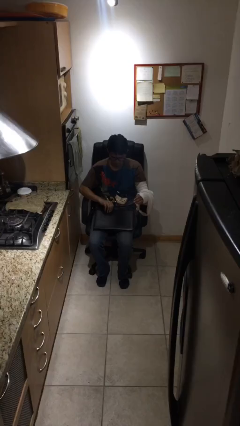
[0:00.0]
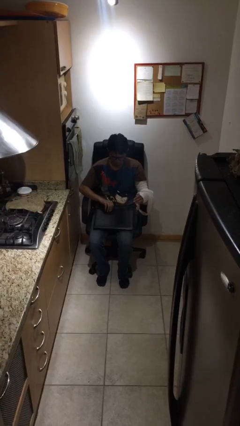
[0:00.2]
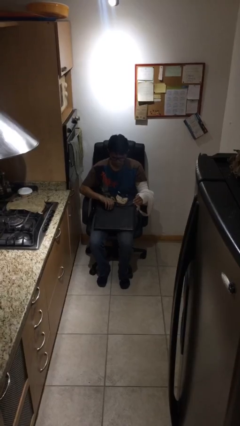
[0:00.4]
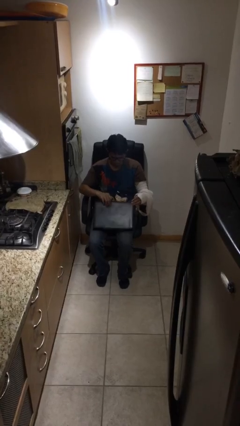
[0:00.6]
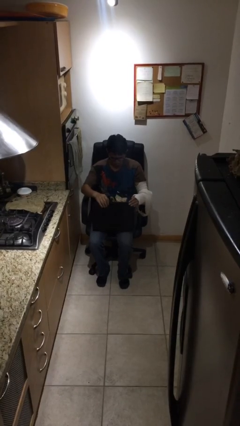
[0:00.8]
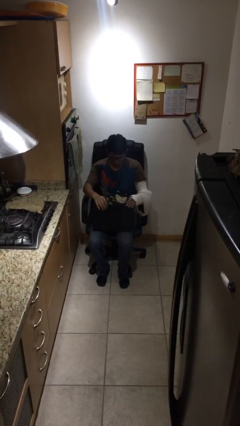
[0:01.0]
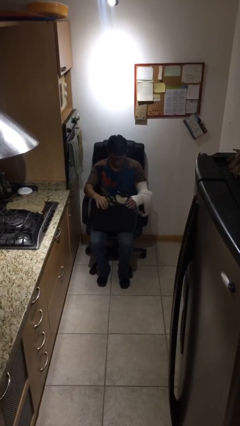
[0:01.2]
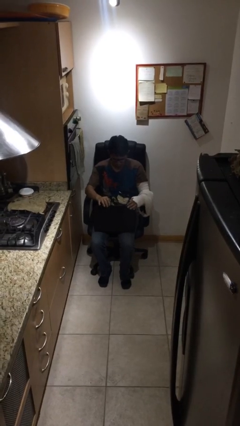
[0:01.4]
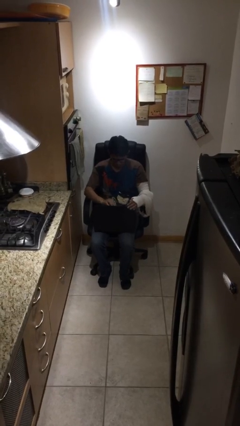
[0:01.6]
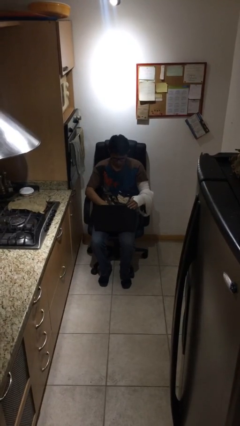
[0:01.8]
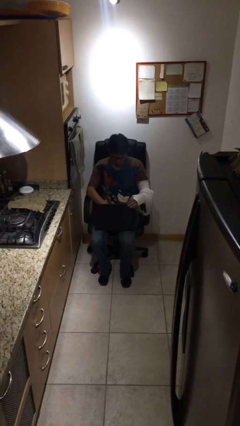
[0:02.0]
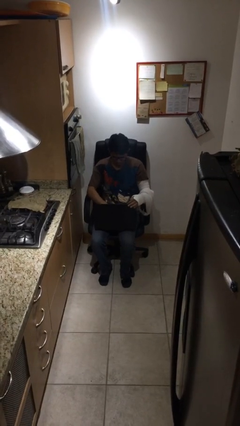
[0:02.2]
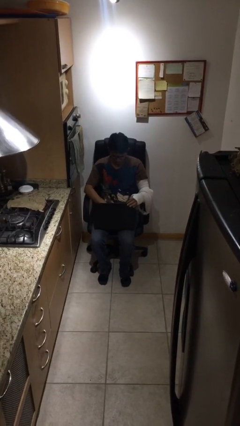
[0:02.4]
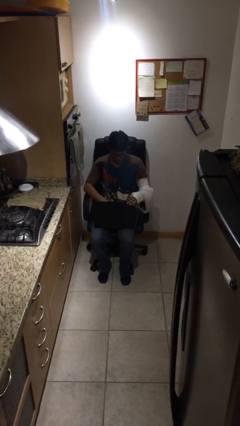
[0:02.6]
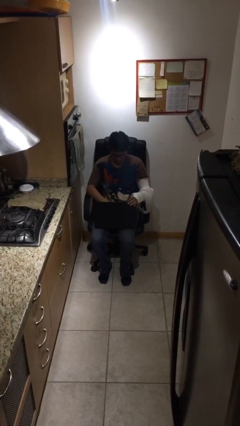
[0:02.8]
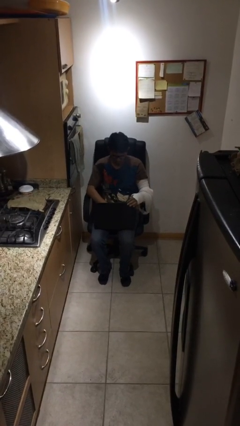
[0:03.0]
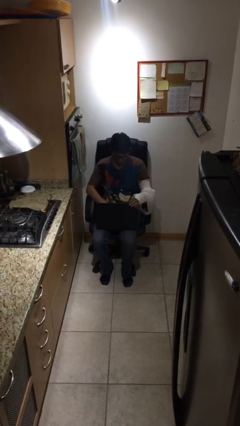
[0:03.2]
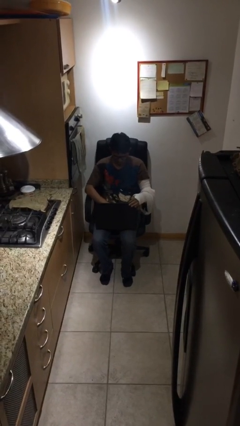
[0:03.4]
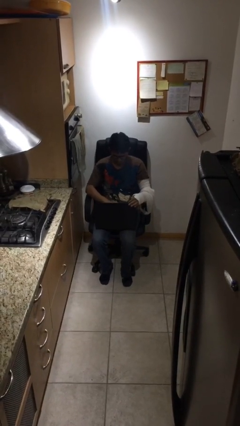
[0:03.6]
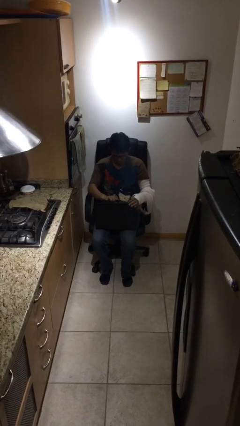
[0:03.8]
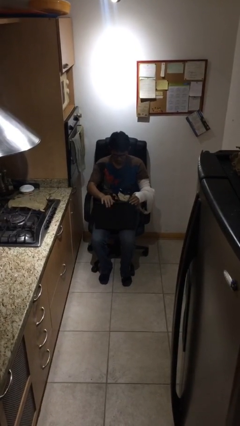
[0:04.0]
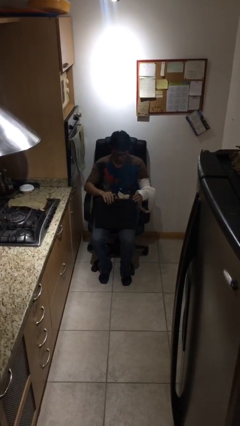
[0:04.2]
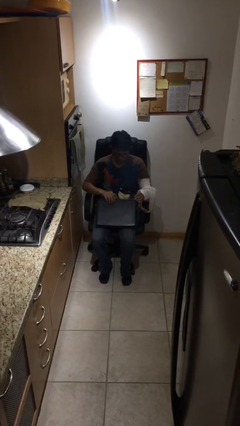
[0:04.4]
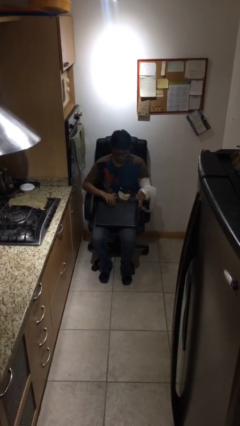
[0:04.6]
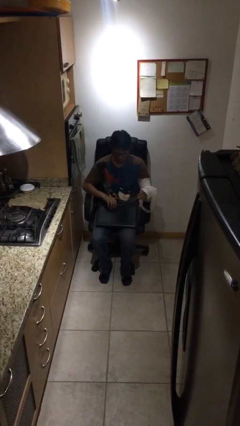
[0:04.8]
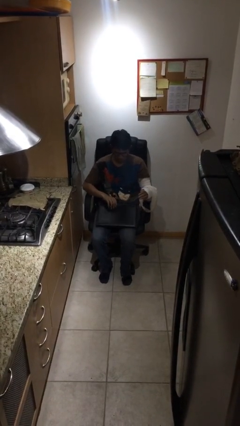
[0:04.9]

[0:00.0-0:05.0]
person interacts with laptop

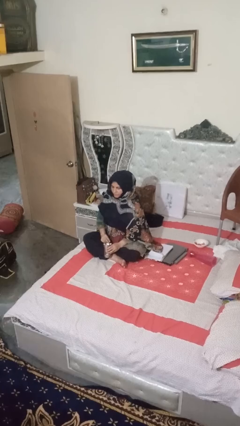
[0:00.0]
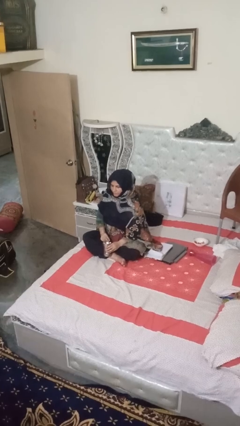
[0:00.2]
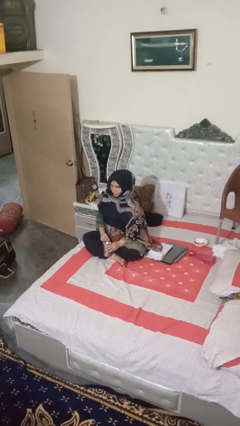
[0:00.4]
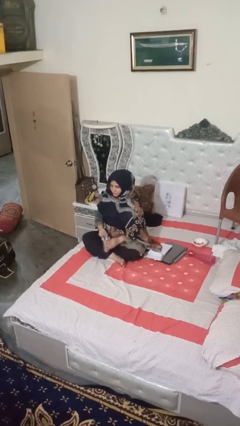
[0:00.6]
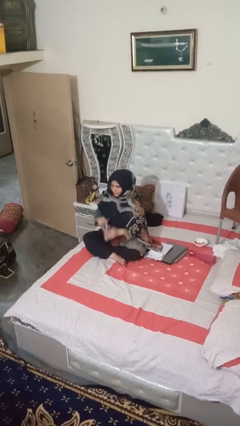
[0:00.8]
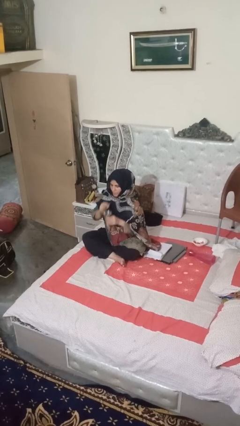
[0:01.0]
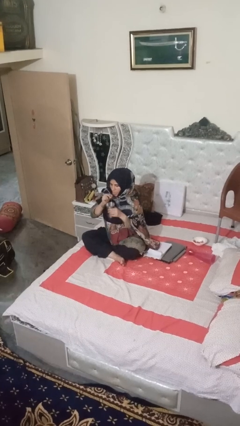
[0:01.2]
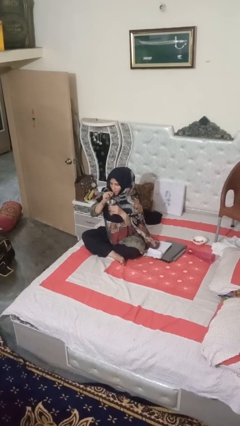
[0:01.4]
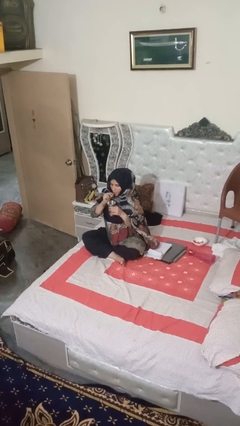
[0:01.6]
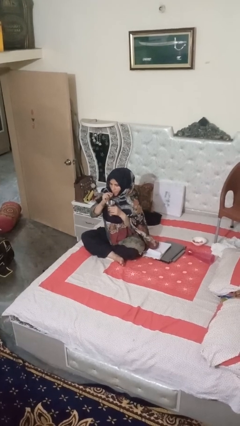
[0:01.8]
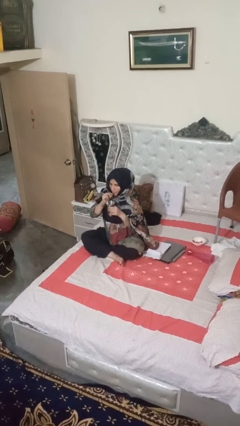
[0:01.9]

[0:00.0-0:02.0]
person drinks from straw

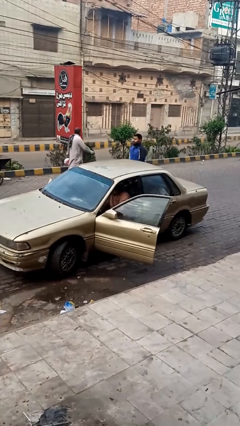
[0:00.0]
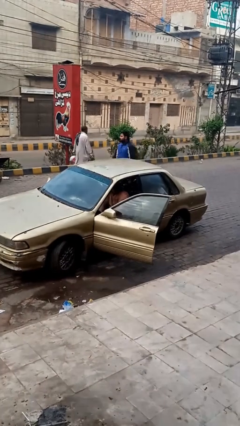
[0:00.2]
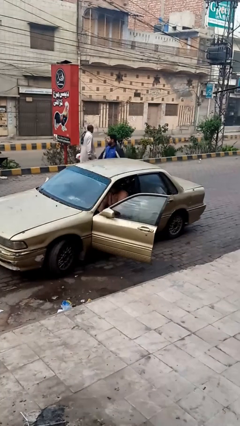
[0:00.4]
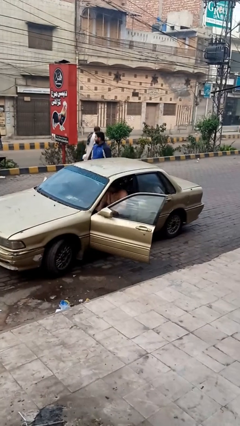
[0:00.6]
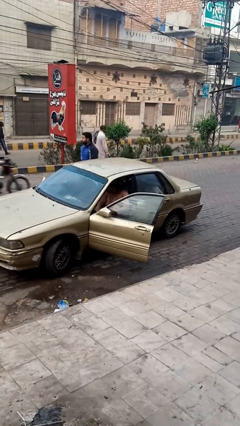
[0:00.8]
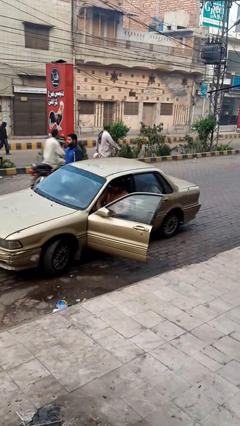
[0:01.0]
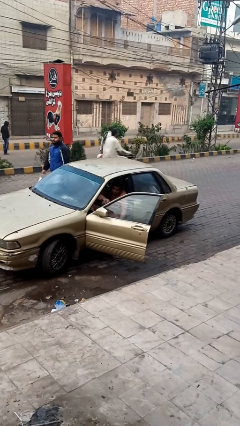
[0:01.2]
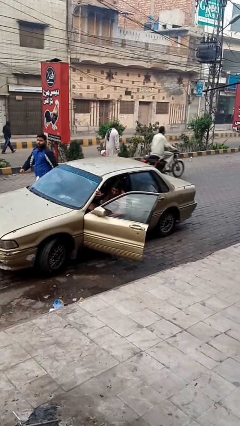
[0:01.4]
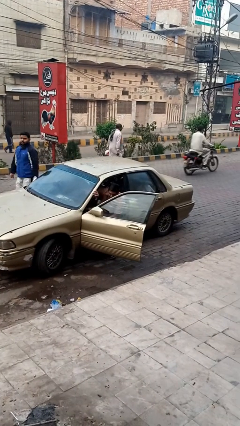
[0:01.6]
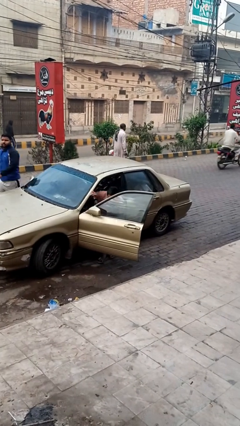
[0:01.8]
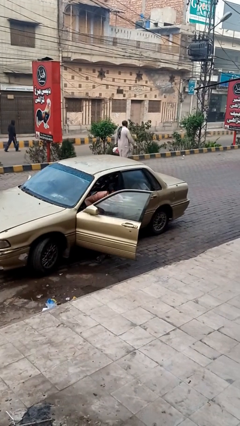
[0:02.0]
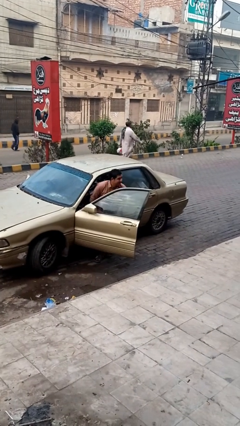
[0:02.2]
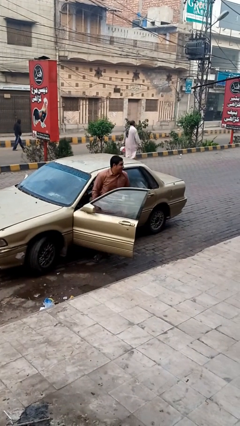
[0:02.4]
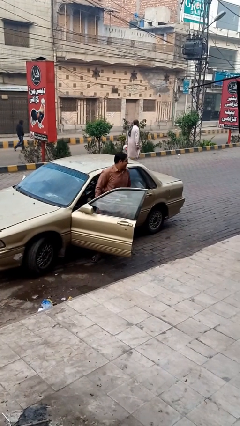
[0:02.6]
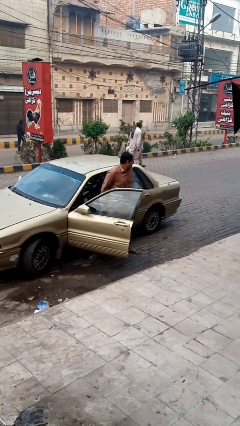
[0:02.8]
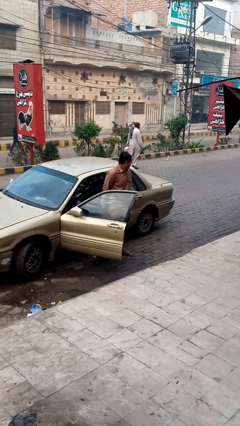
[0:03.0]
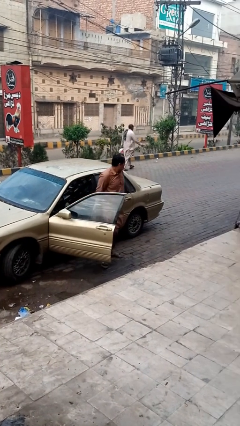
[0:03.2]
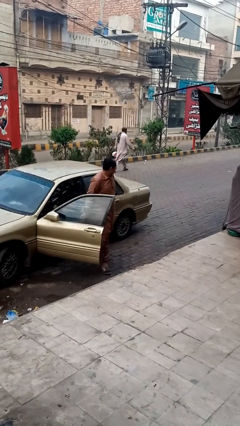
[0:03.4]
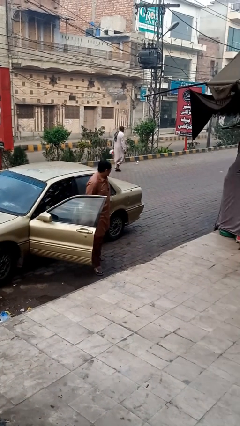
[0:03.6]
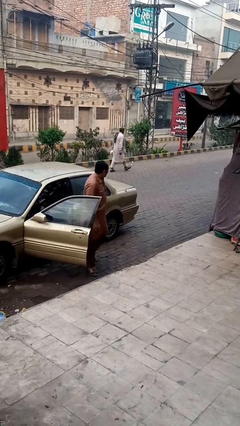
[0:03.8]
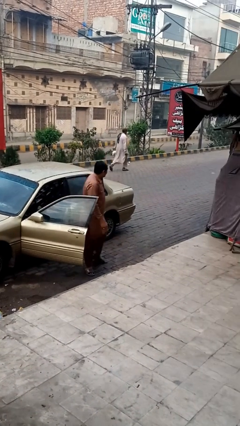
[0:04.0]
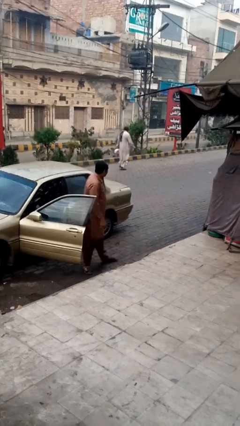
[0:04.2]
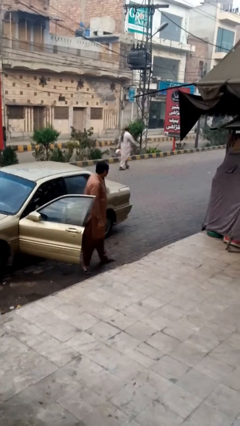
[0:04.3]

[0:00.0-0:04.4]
person exits car

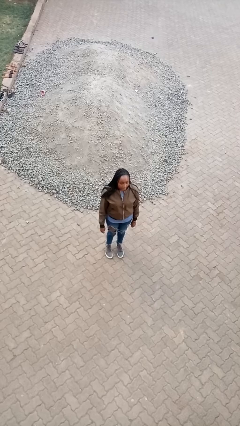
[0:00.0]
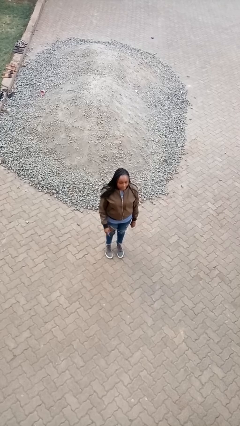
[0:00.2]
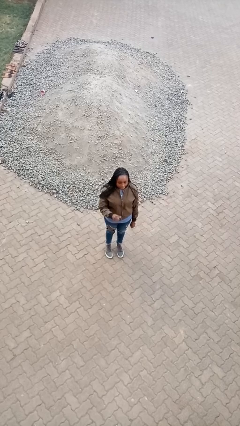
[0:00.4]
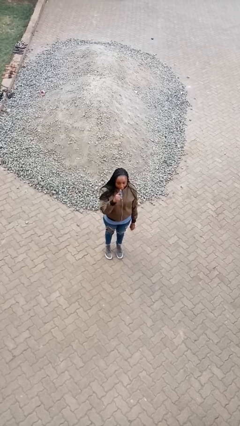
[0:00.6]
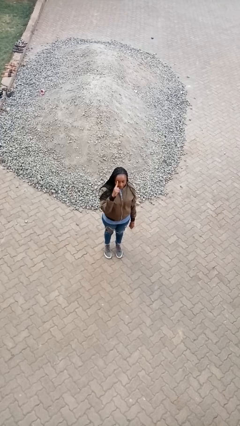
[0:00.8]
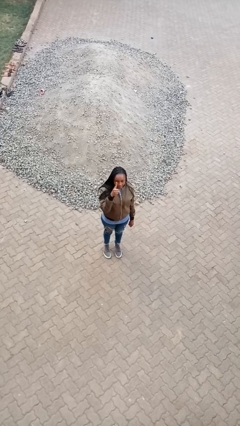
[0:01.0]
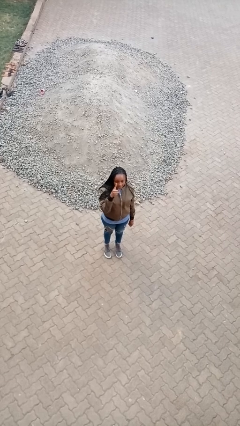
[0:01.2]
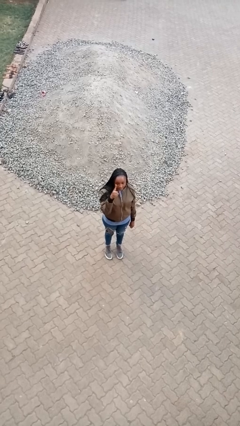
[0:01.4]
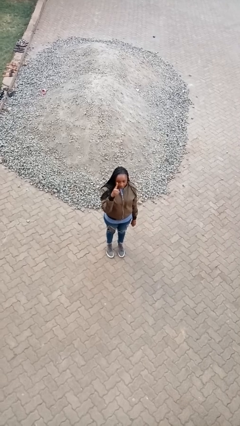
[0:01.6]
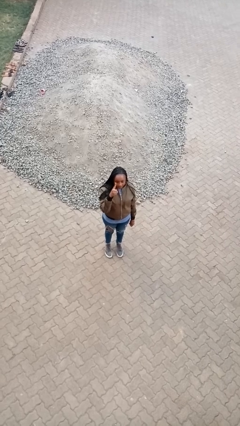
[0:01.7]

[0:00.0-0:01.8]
person gestures number one

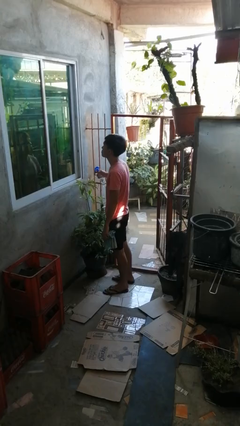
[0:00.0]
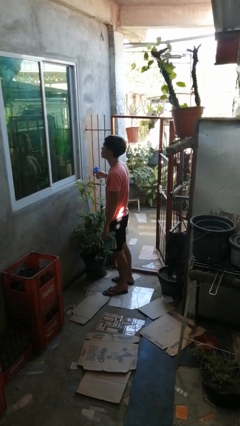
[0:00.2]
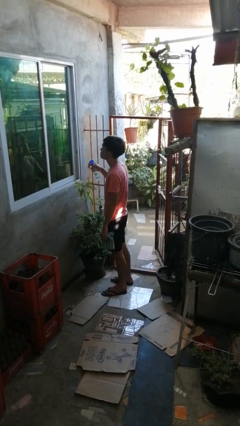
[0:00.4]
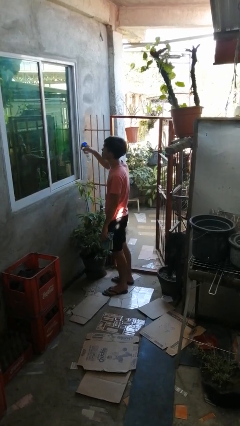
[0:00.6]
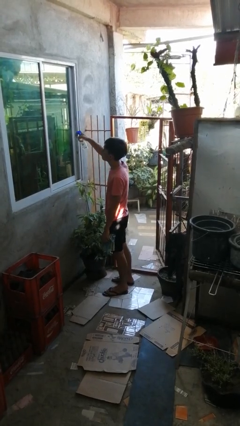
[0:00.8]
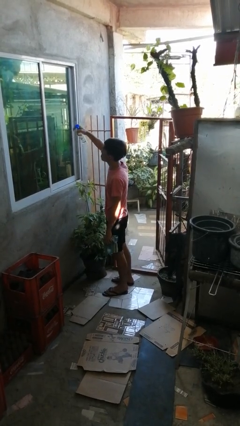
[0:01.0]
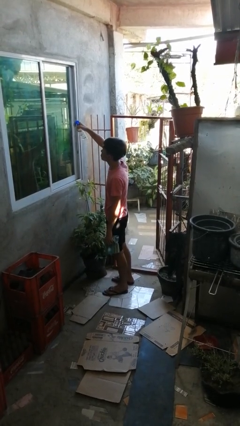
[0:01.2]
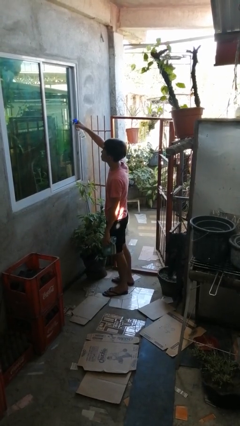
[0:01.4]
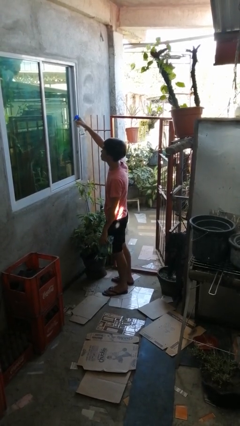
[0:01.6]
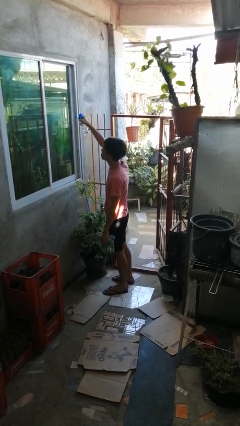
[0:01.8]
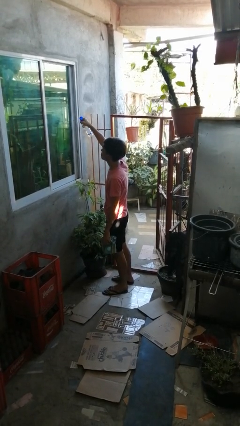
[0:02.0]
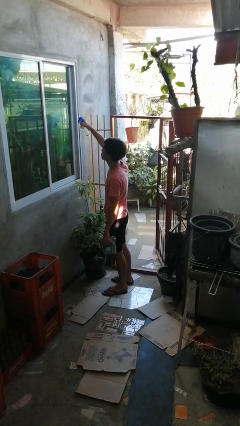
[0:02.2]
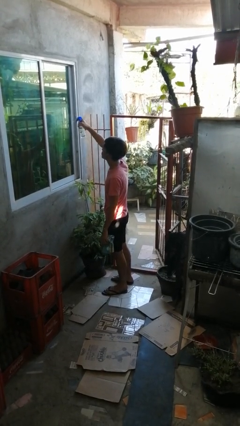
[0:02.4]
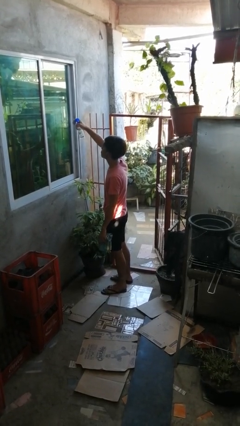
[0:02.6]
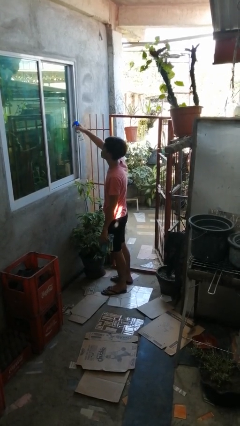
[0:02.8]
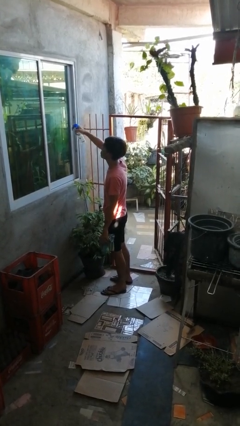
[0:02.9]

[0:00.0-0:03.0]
person sprays from bottle

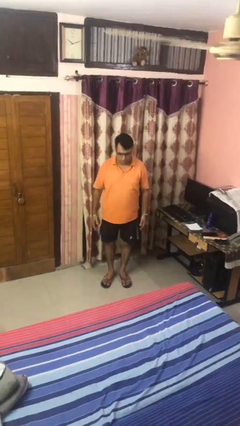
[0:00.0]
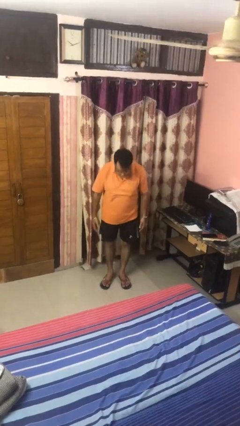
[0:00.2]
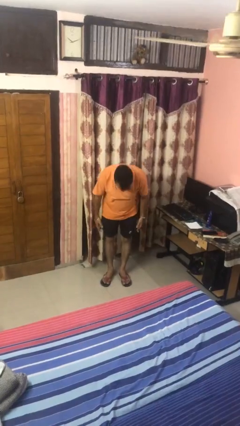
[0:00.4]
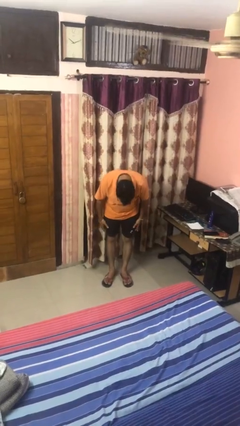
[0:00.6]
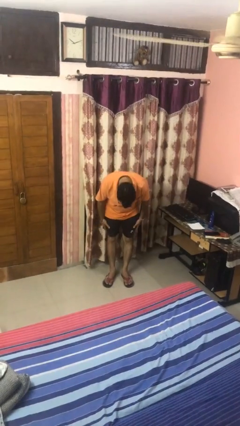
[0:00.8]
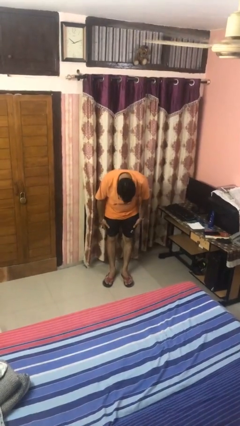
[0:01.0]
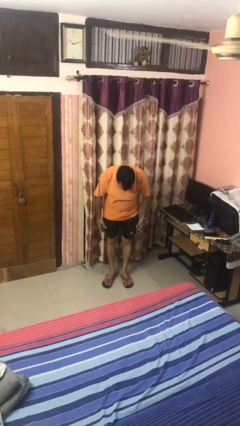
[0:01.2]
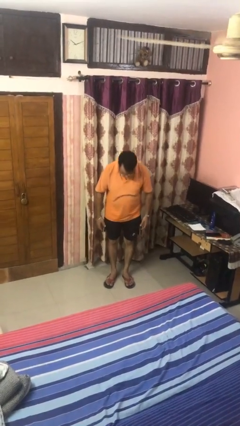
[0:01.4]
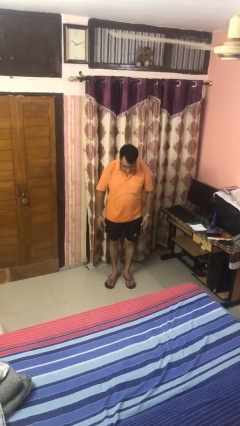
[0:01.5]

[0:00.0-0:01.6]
person bows
